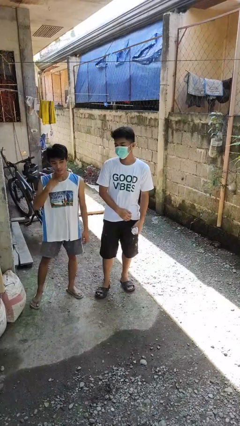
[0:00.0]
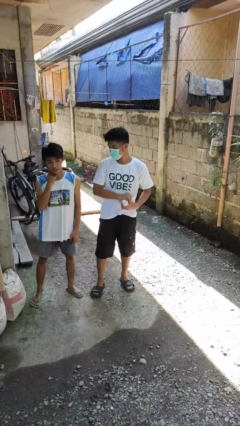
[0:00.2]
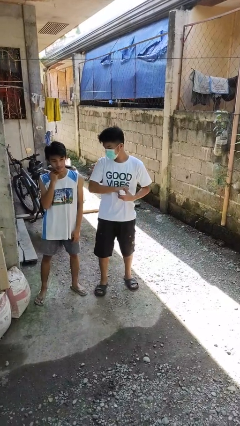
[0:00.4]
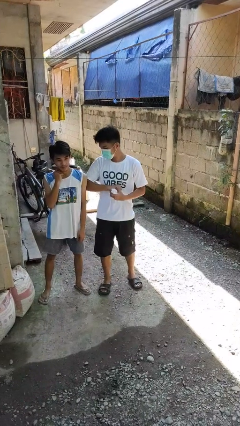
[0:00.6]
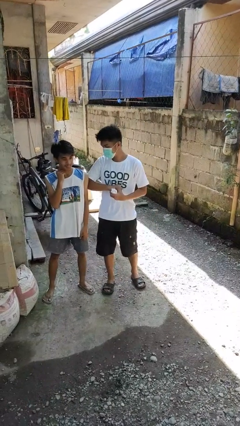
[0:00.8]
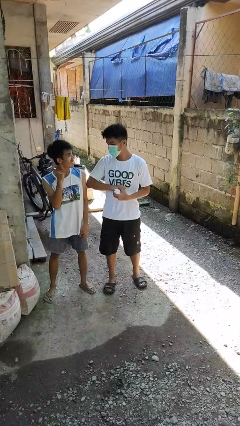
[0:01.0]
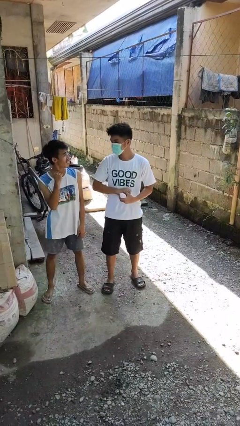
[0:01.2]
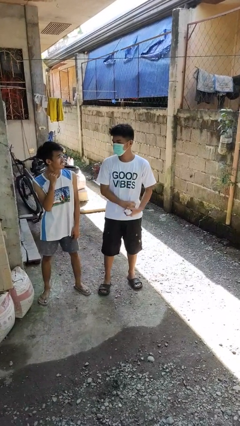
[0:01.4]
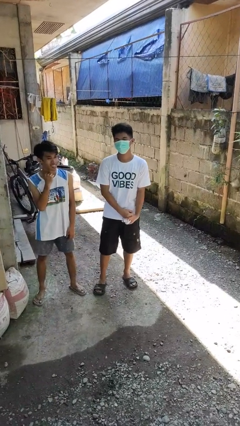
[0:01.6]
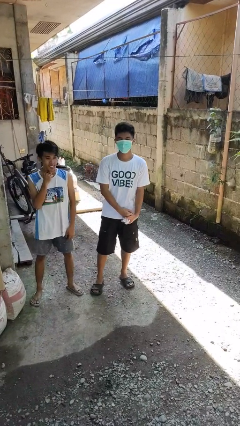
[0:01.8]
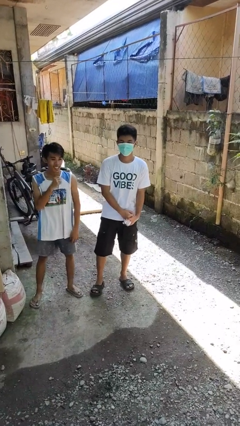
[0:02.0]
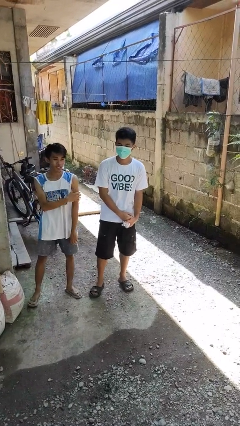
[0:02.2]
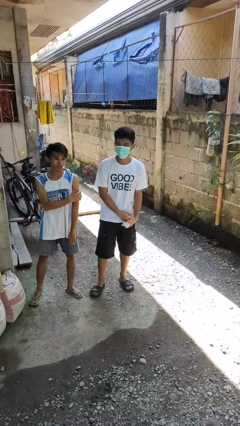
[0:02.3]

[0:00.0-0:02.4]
person nudges person with elbow

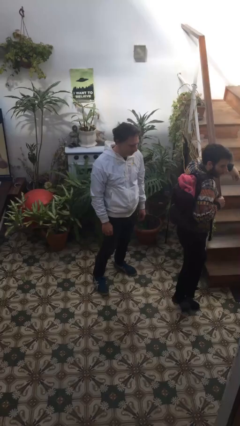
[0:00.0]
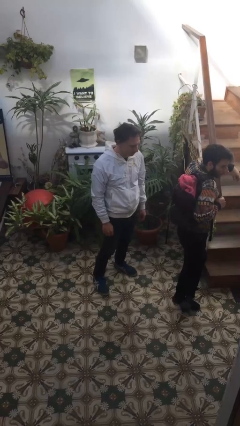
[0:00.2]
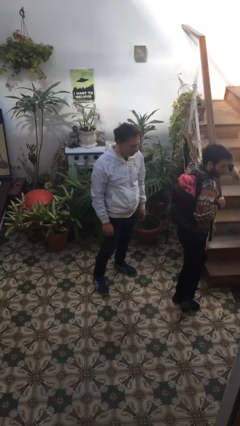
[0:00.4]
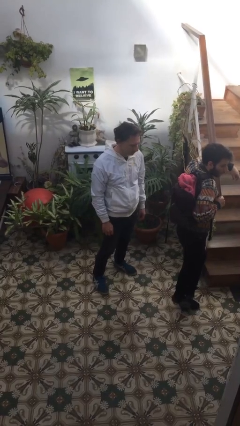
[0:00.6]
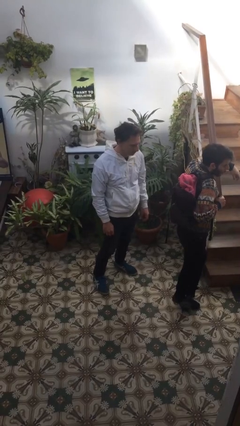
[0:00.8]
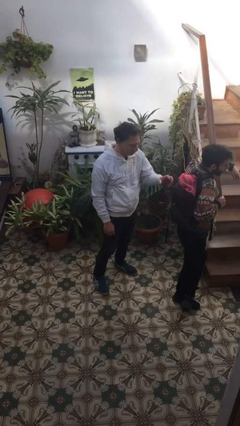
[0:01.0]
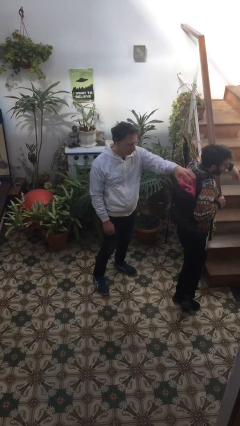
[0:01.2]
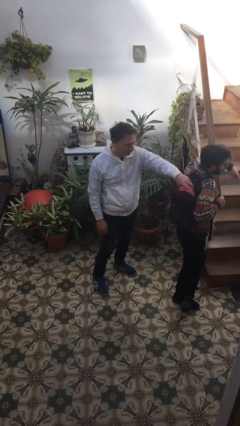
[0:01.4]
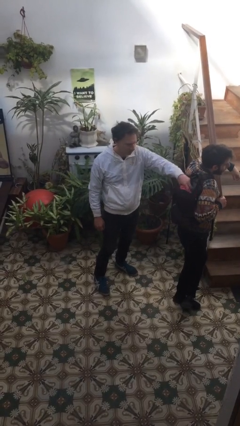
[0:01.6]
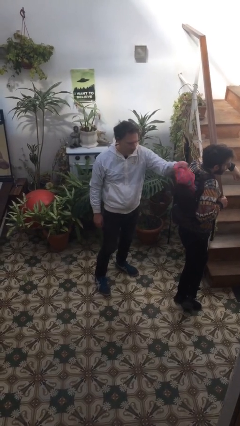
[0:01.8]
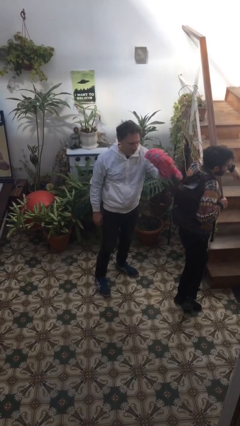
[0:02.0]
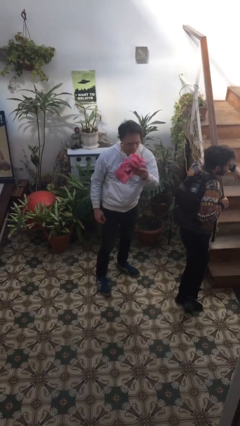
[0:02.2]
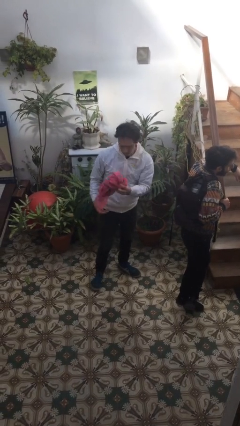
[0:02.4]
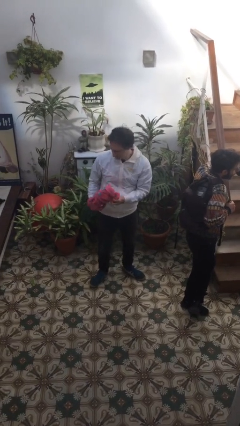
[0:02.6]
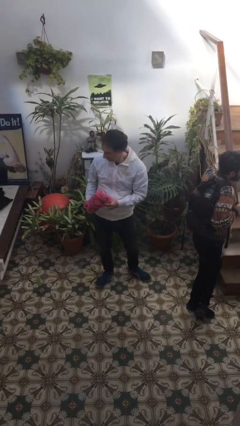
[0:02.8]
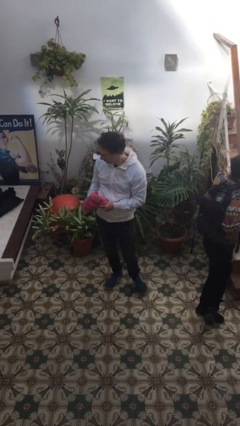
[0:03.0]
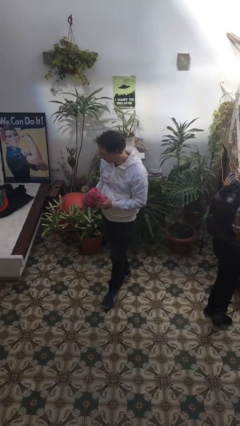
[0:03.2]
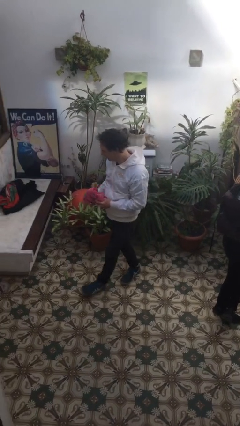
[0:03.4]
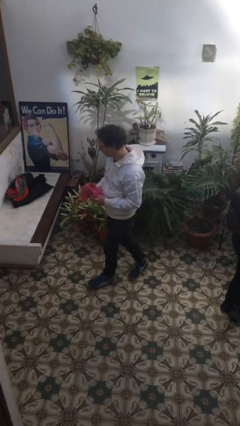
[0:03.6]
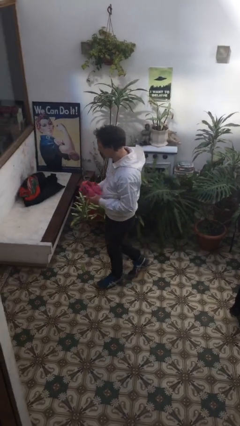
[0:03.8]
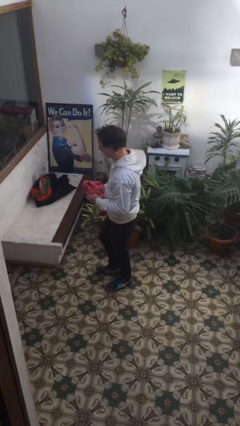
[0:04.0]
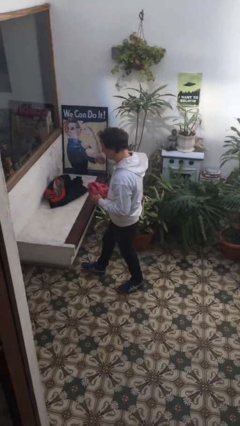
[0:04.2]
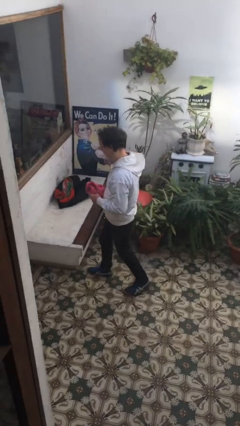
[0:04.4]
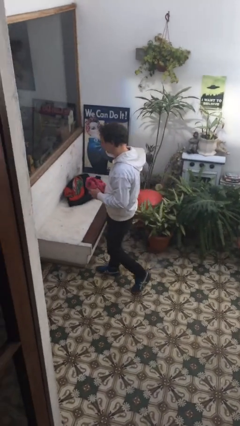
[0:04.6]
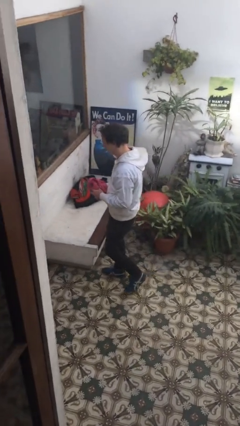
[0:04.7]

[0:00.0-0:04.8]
person steals object from person

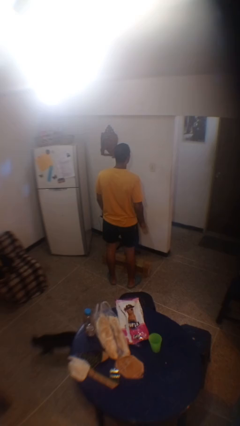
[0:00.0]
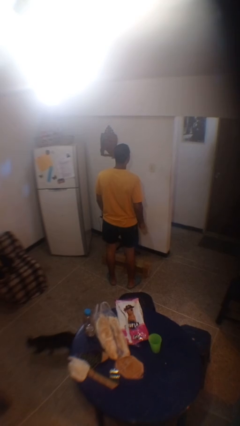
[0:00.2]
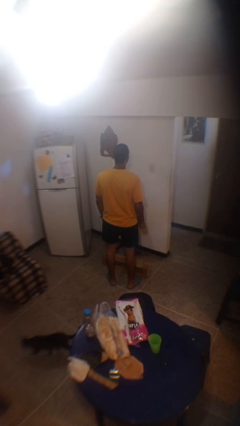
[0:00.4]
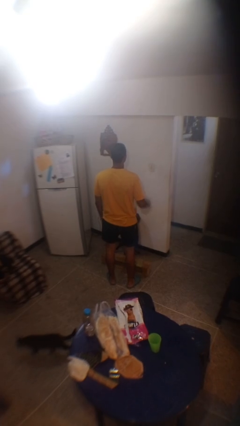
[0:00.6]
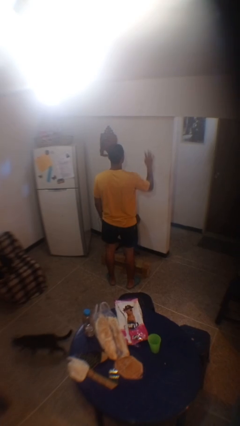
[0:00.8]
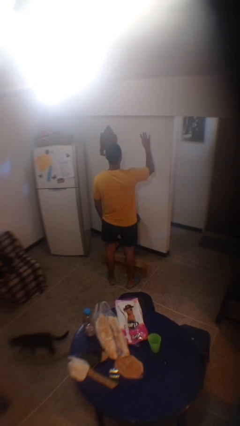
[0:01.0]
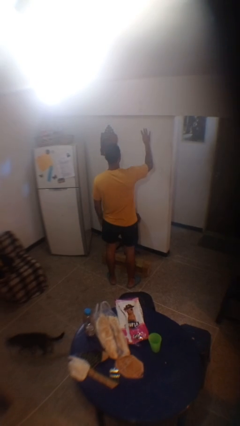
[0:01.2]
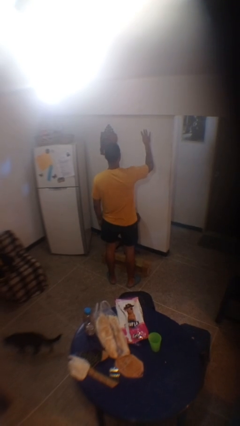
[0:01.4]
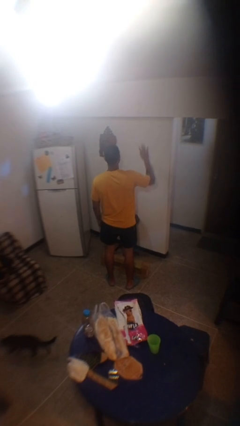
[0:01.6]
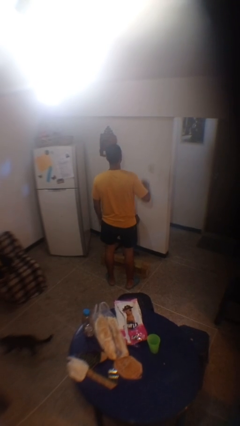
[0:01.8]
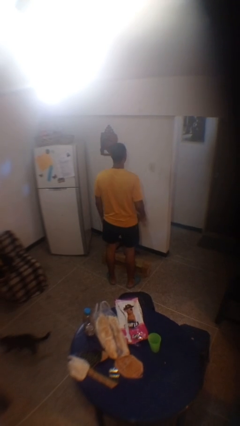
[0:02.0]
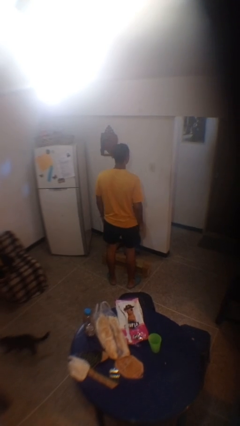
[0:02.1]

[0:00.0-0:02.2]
person gestures number four

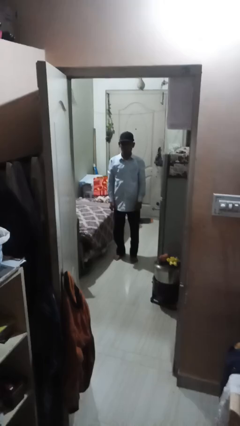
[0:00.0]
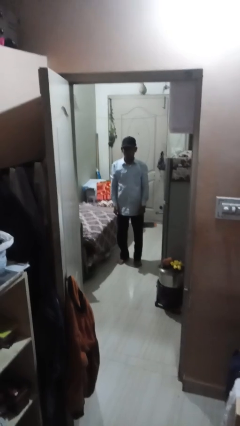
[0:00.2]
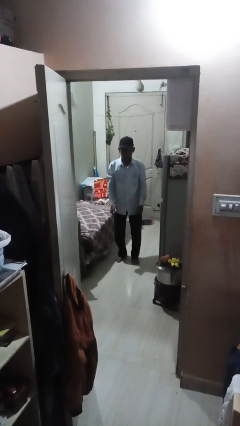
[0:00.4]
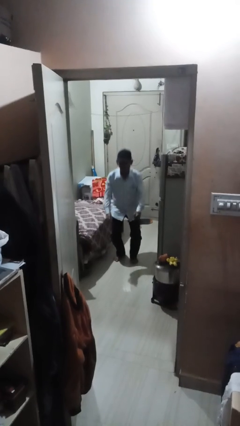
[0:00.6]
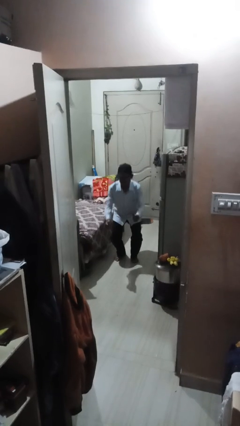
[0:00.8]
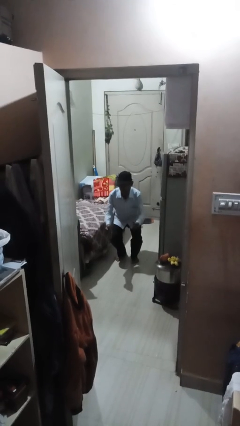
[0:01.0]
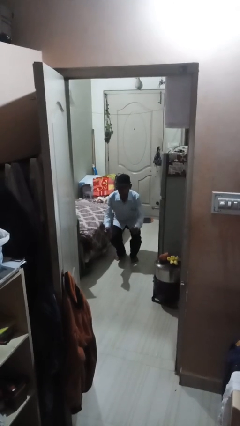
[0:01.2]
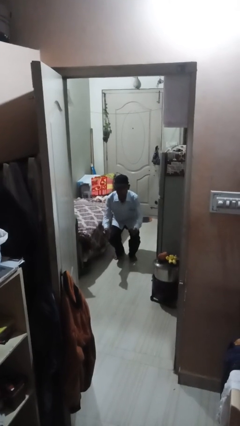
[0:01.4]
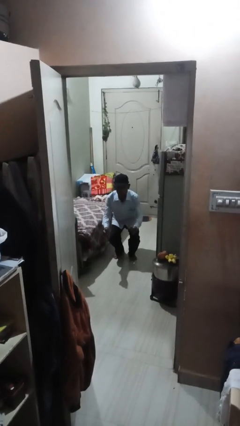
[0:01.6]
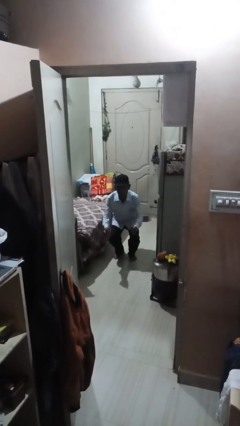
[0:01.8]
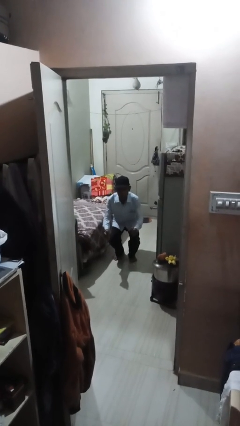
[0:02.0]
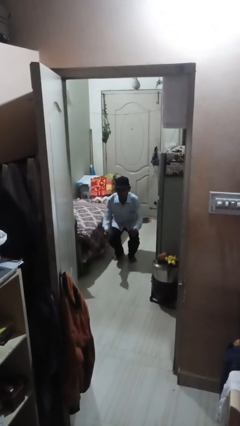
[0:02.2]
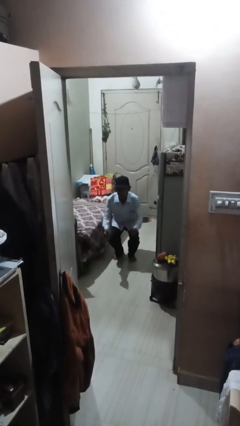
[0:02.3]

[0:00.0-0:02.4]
person squats

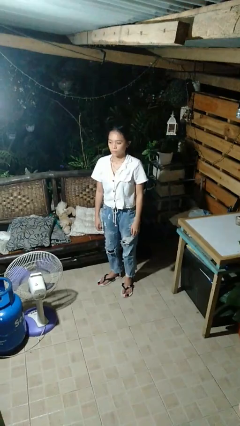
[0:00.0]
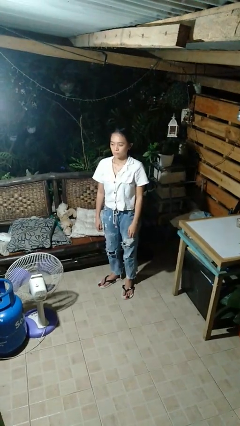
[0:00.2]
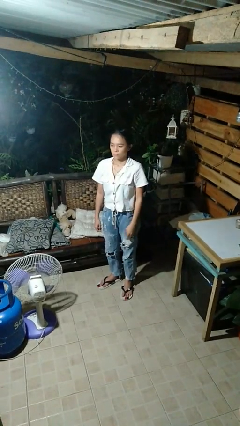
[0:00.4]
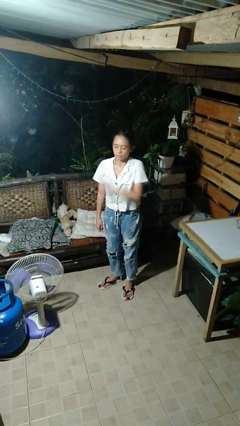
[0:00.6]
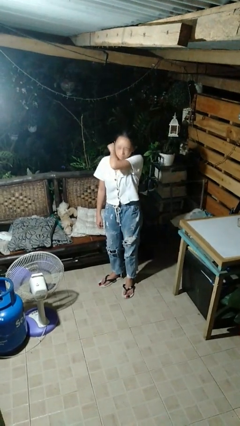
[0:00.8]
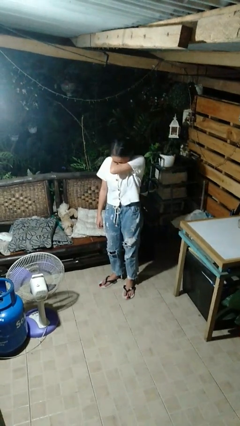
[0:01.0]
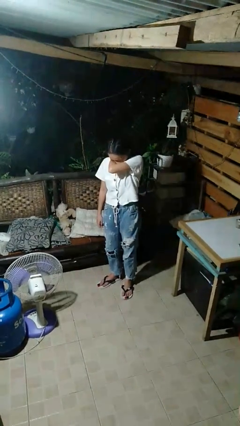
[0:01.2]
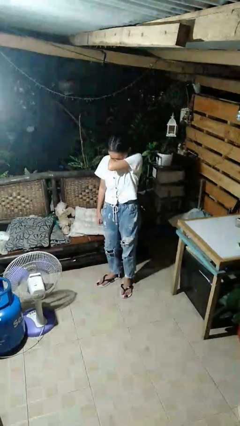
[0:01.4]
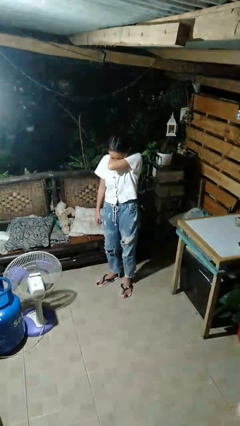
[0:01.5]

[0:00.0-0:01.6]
person sneezes into arm

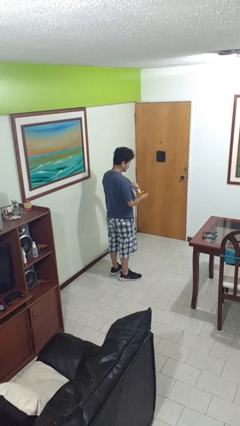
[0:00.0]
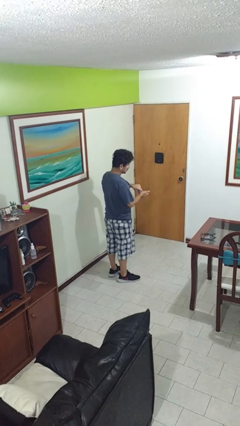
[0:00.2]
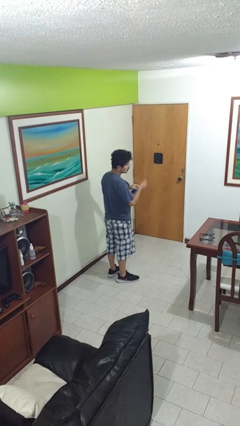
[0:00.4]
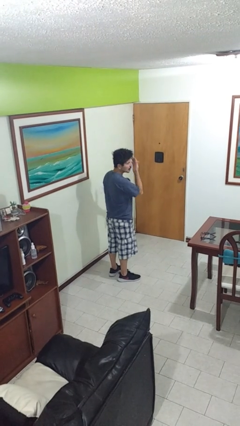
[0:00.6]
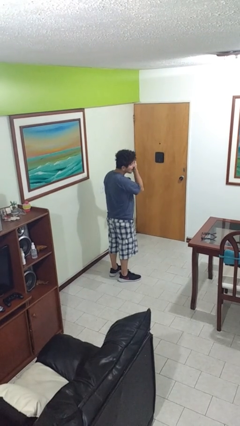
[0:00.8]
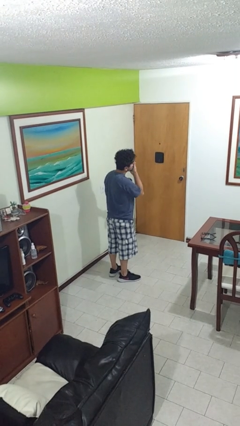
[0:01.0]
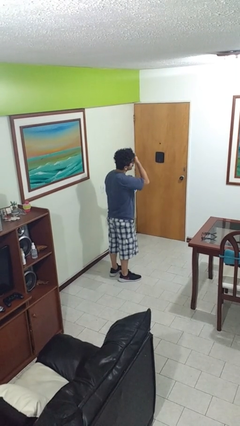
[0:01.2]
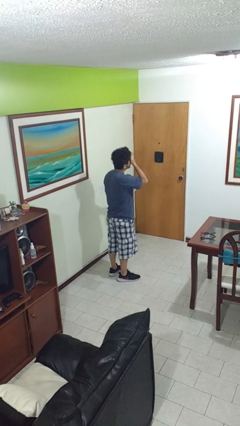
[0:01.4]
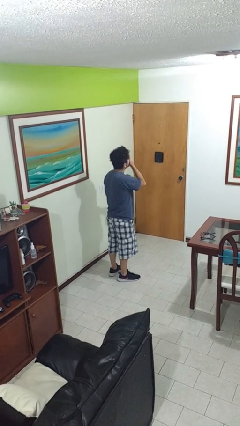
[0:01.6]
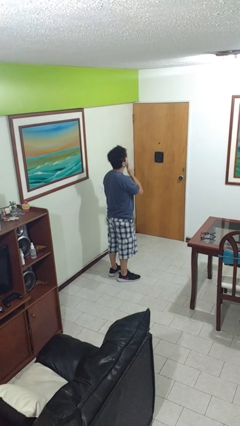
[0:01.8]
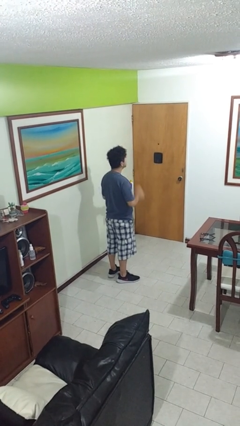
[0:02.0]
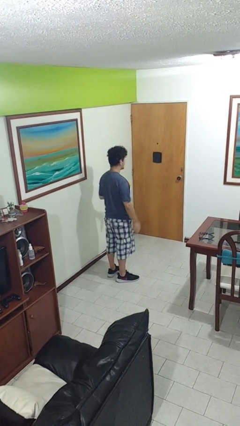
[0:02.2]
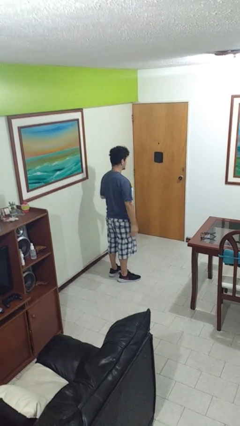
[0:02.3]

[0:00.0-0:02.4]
person applies sunscreen

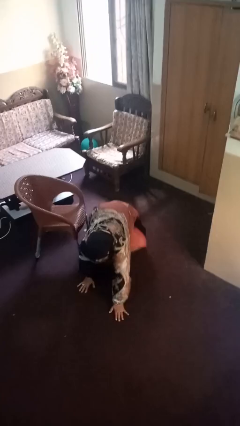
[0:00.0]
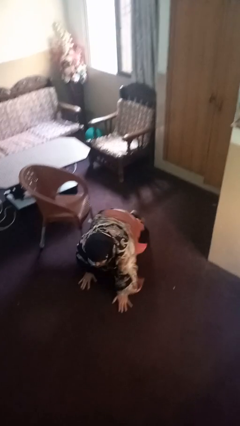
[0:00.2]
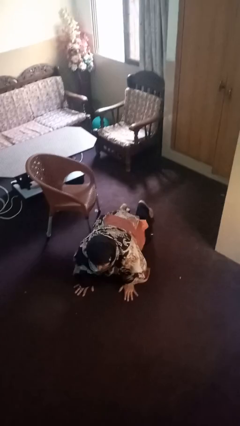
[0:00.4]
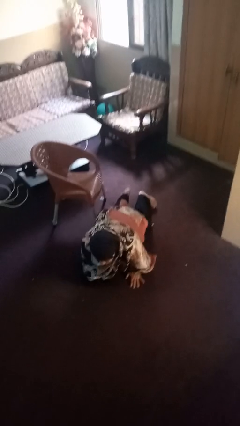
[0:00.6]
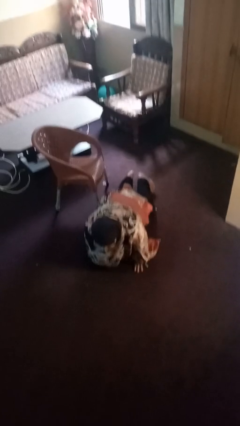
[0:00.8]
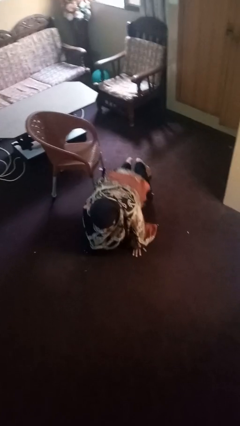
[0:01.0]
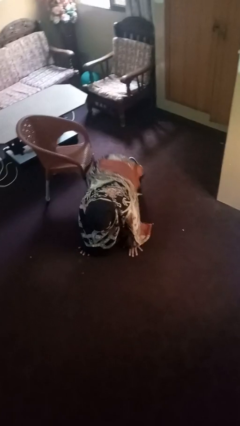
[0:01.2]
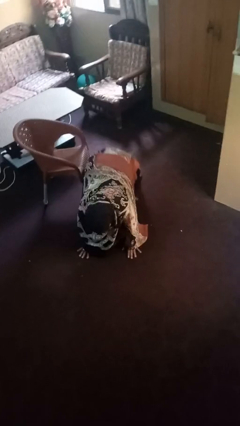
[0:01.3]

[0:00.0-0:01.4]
person lies down on floor
